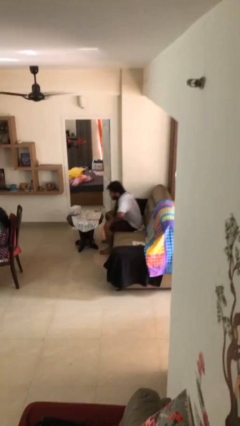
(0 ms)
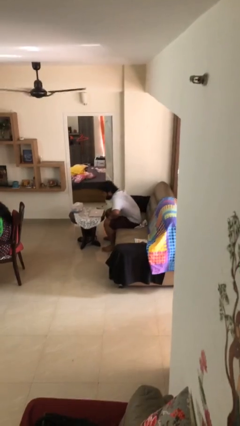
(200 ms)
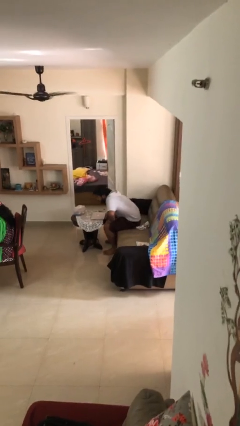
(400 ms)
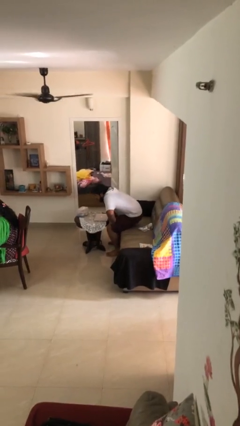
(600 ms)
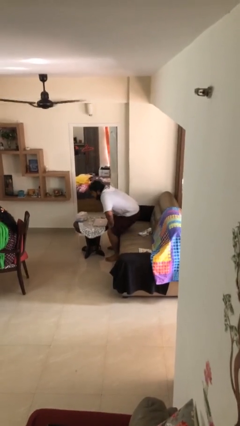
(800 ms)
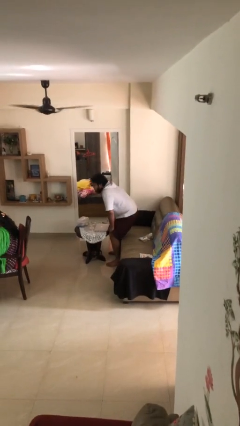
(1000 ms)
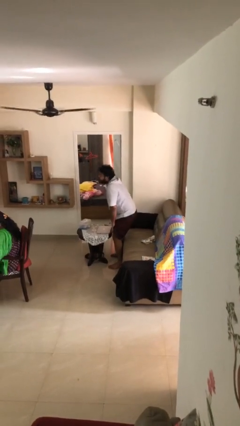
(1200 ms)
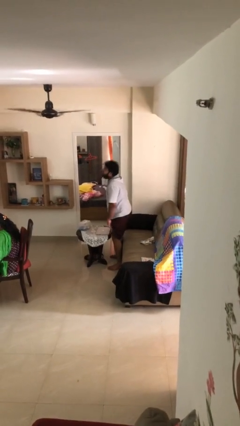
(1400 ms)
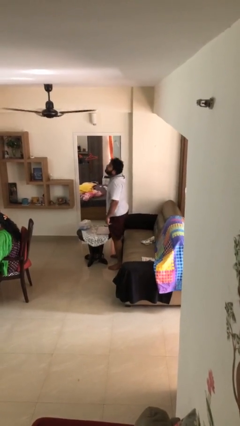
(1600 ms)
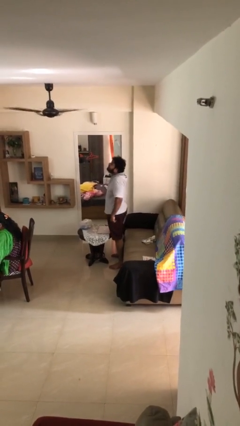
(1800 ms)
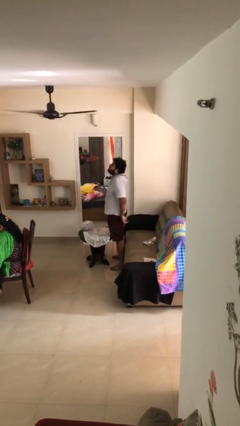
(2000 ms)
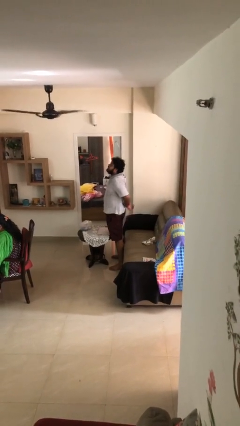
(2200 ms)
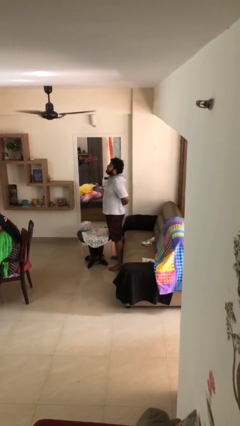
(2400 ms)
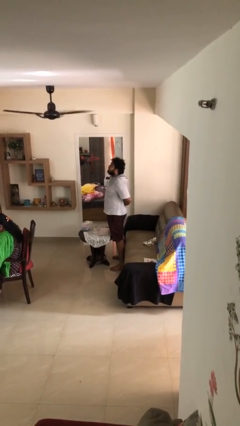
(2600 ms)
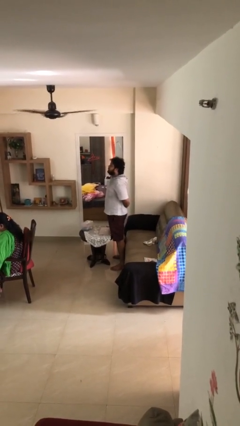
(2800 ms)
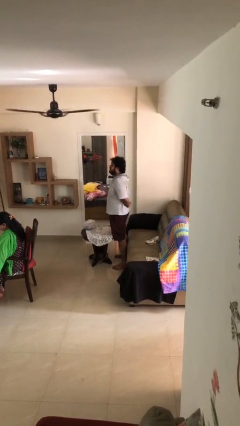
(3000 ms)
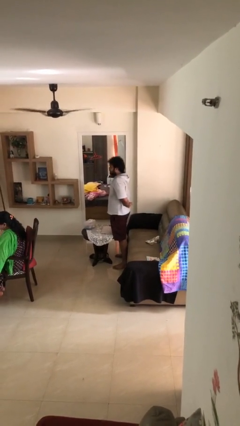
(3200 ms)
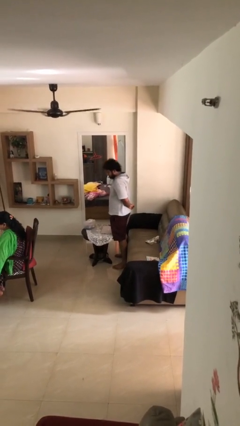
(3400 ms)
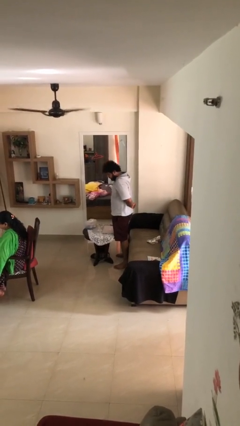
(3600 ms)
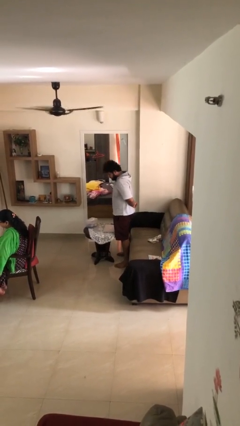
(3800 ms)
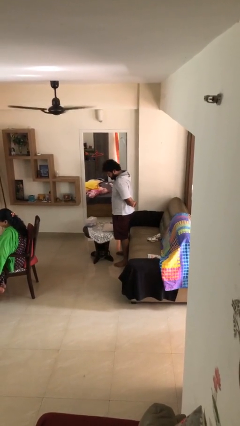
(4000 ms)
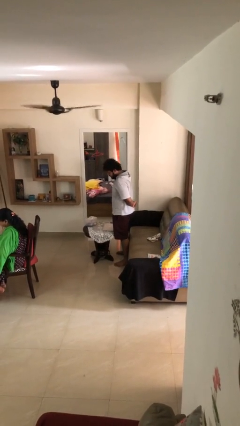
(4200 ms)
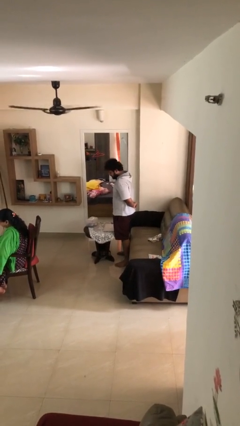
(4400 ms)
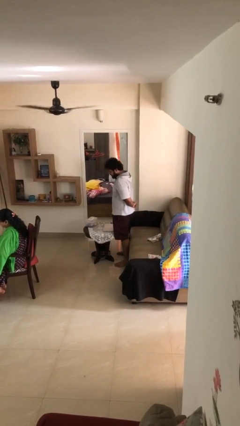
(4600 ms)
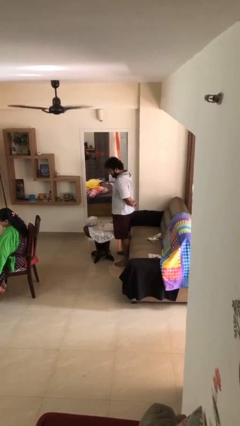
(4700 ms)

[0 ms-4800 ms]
person stands up

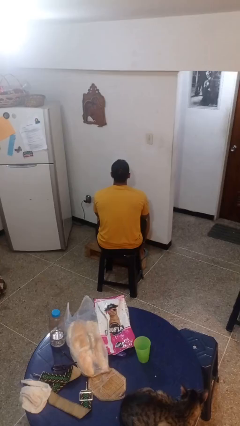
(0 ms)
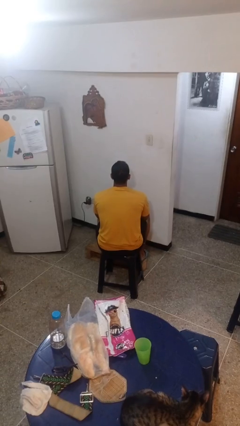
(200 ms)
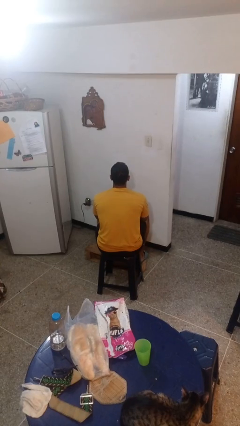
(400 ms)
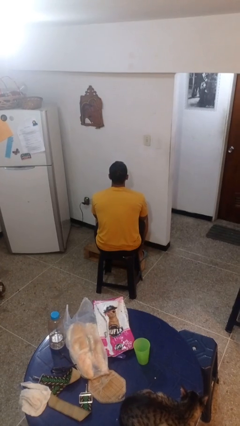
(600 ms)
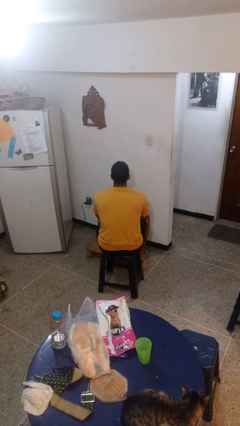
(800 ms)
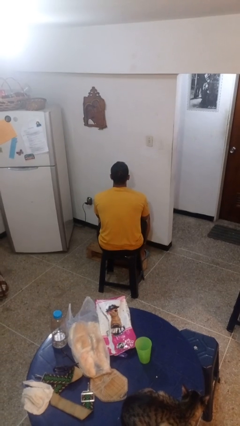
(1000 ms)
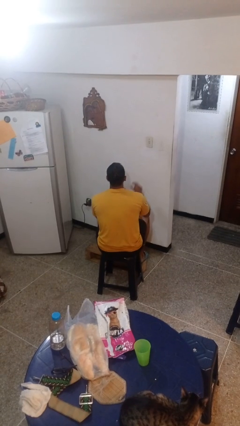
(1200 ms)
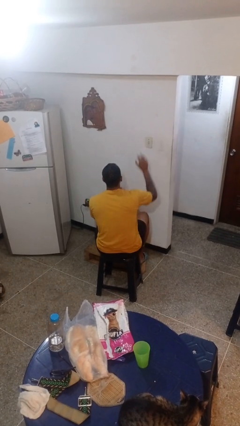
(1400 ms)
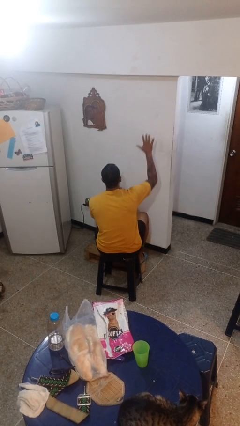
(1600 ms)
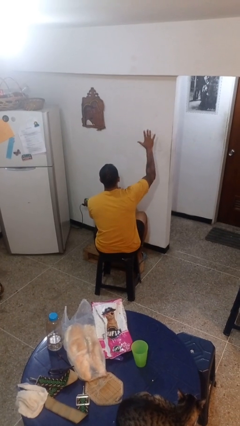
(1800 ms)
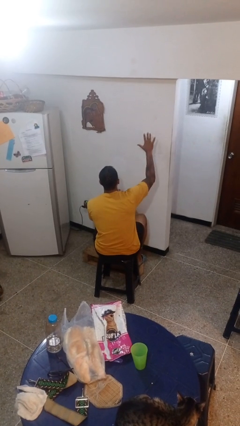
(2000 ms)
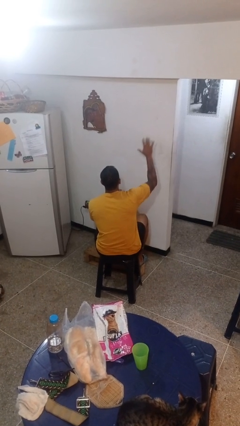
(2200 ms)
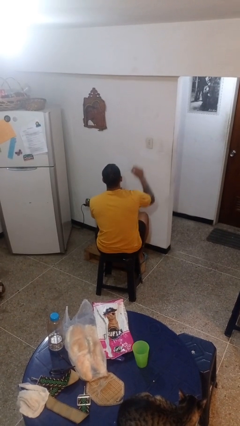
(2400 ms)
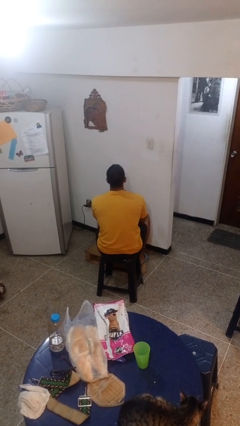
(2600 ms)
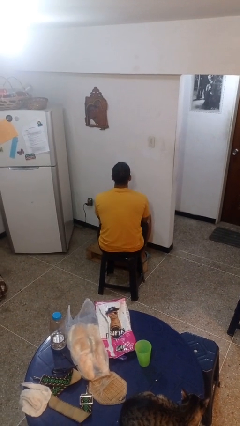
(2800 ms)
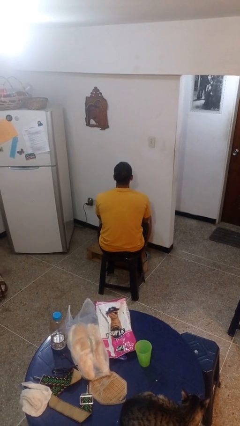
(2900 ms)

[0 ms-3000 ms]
person gestures number five

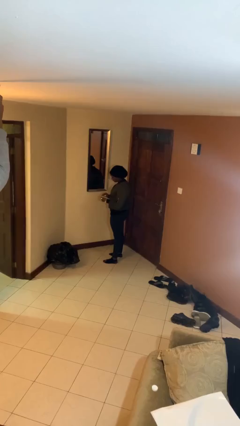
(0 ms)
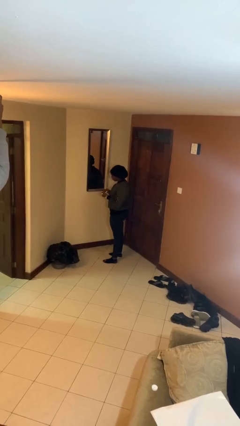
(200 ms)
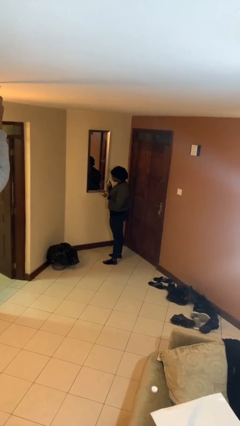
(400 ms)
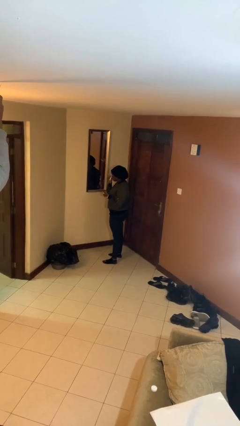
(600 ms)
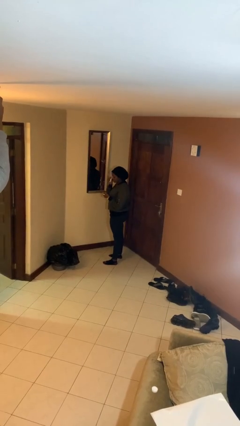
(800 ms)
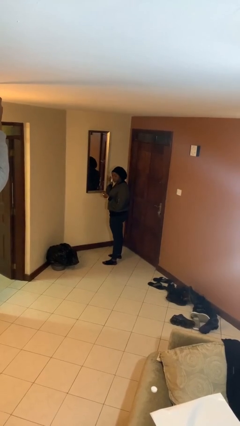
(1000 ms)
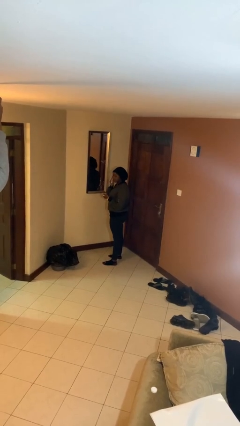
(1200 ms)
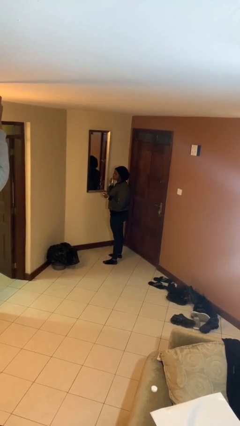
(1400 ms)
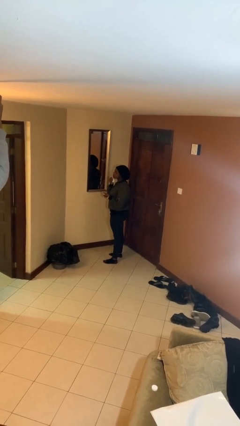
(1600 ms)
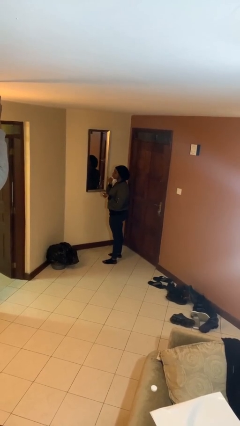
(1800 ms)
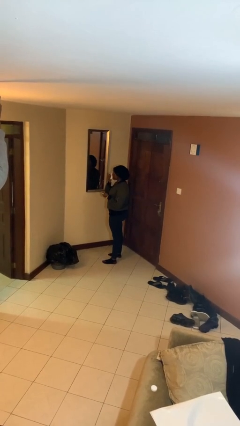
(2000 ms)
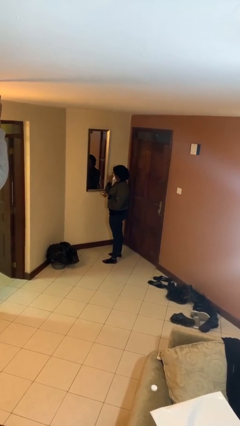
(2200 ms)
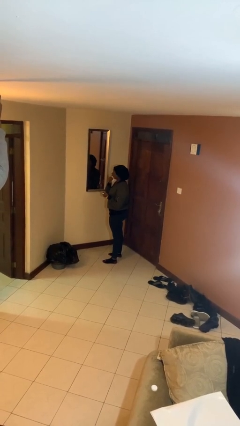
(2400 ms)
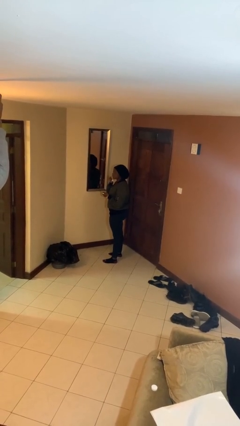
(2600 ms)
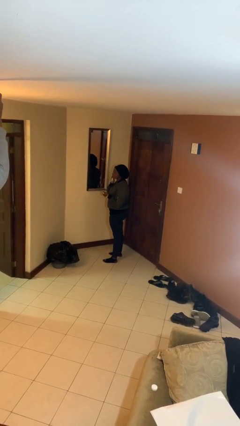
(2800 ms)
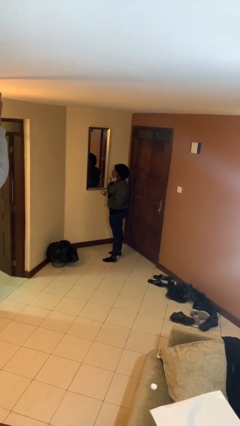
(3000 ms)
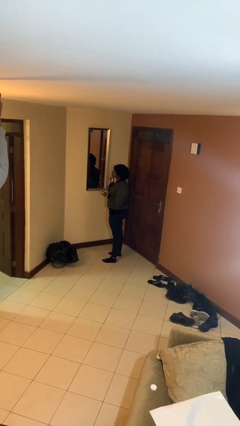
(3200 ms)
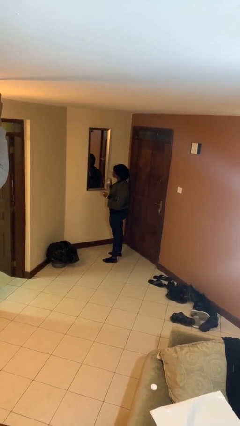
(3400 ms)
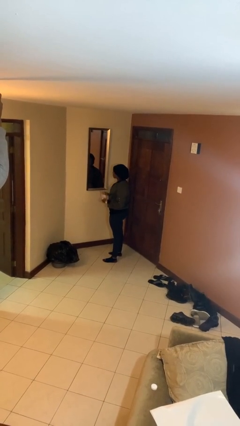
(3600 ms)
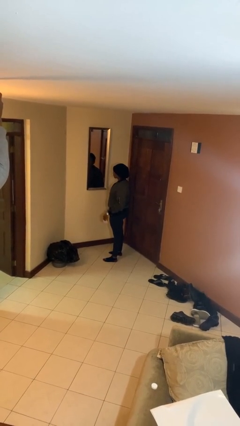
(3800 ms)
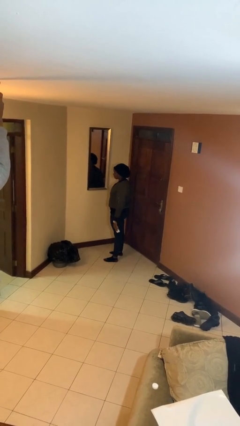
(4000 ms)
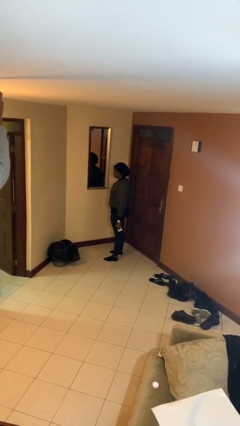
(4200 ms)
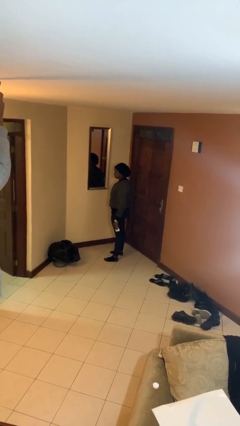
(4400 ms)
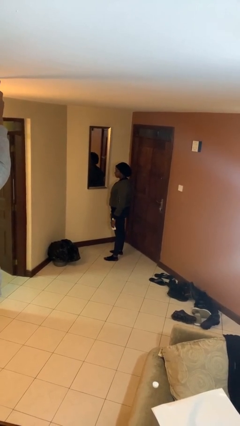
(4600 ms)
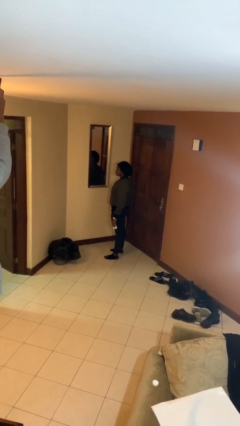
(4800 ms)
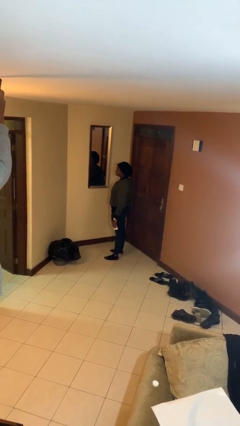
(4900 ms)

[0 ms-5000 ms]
person applies foundation makeup

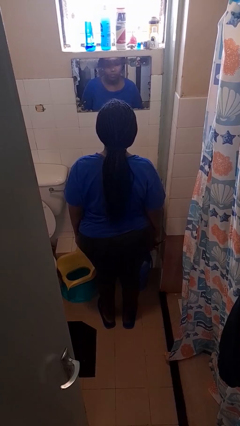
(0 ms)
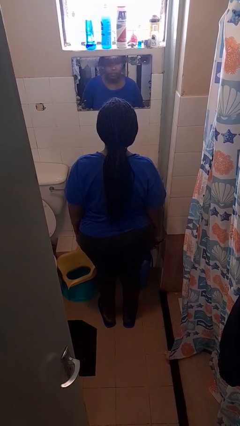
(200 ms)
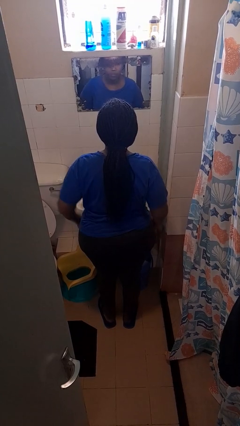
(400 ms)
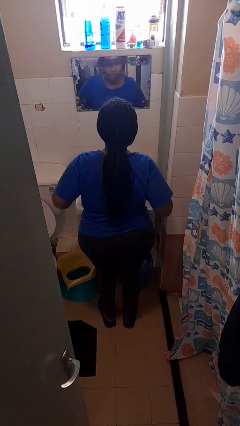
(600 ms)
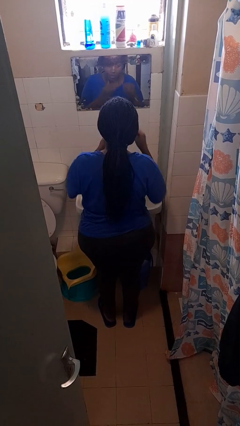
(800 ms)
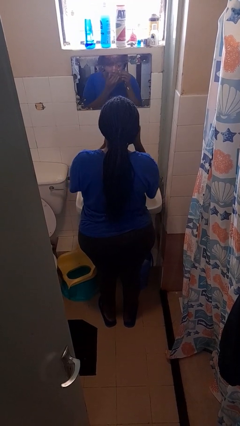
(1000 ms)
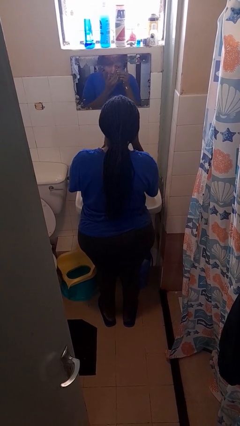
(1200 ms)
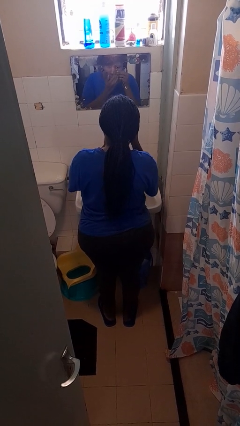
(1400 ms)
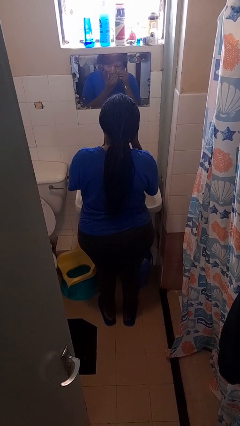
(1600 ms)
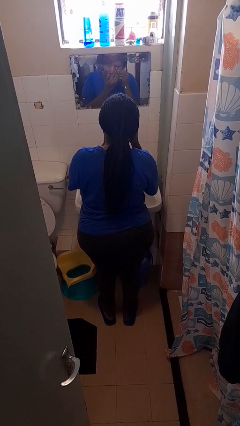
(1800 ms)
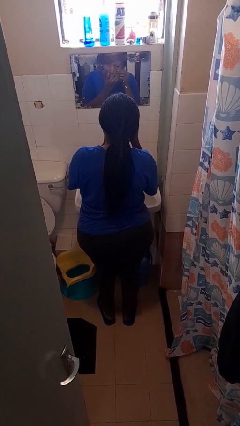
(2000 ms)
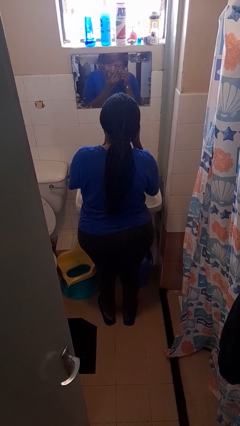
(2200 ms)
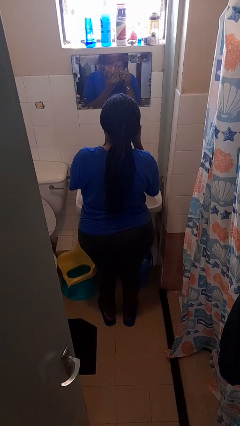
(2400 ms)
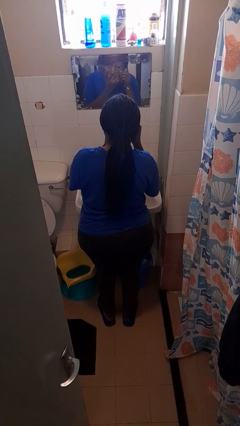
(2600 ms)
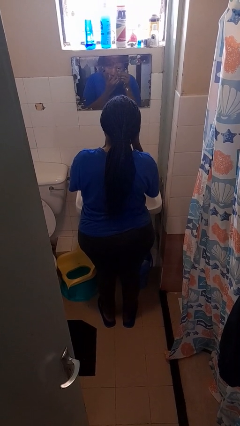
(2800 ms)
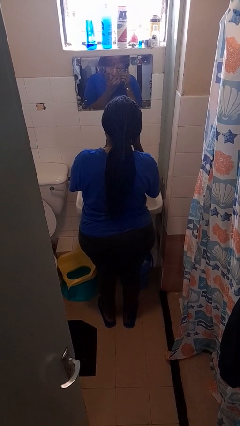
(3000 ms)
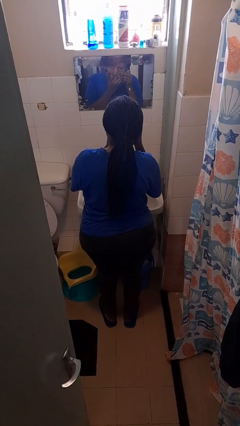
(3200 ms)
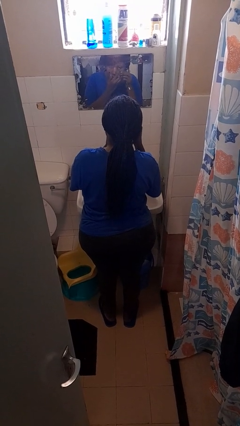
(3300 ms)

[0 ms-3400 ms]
person applies eye makeup

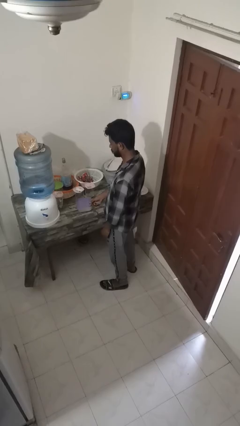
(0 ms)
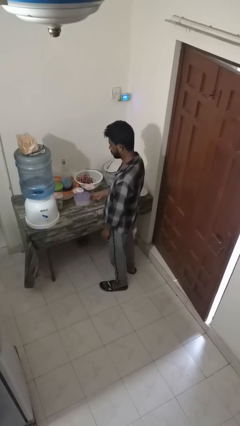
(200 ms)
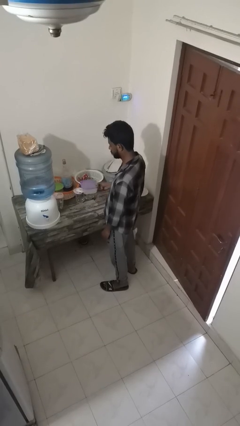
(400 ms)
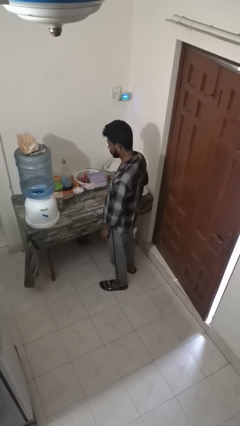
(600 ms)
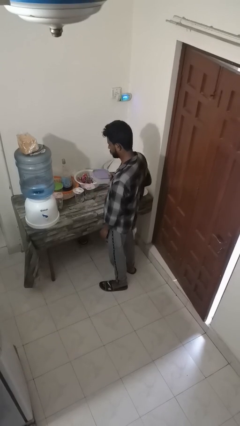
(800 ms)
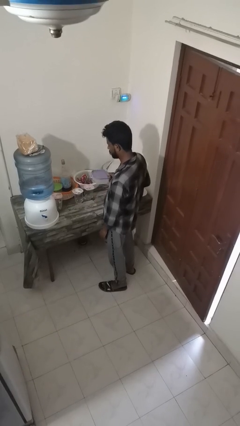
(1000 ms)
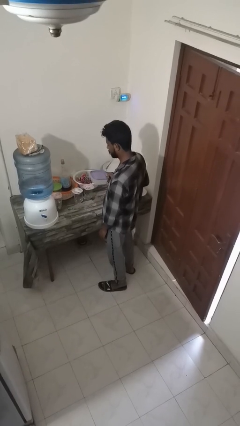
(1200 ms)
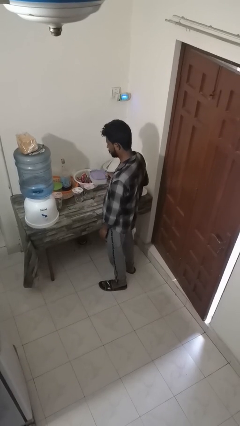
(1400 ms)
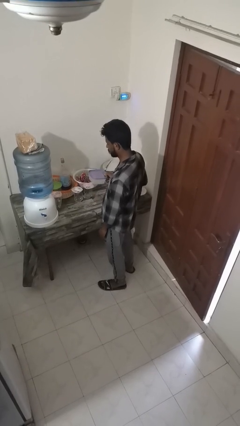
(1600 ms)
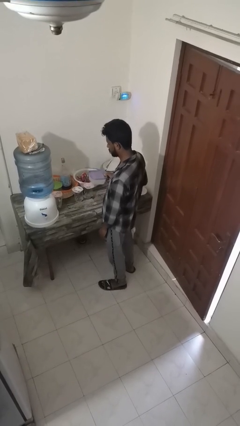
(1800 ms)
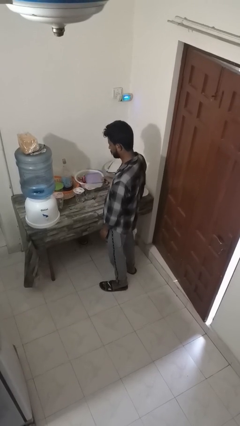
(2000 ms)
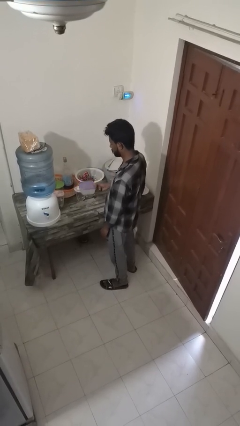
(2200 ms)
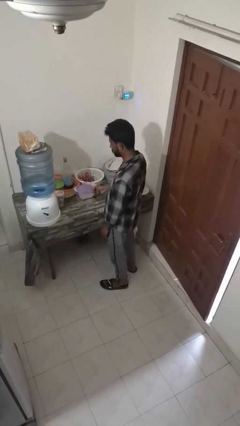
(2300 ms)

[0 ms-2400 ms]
person picks up object from countertop
